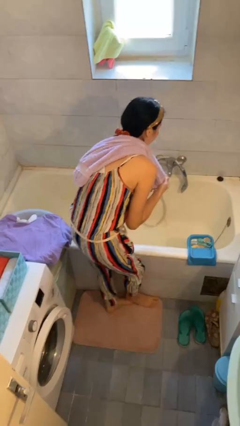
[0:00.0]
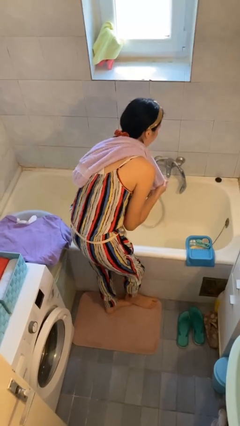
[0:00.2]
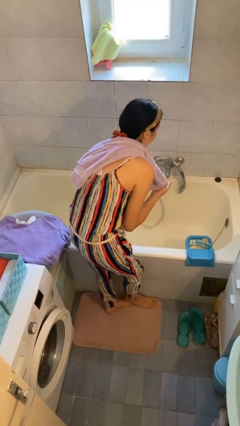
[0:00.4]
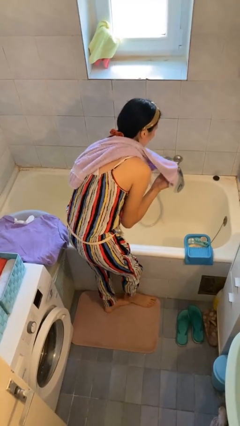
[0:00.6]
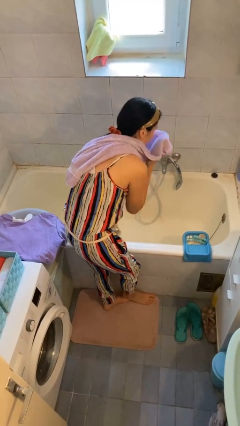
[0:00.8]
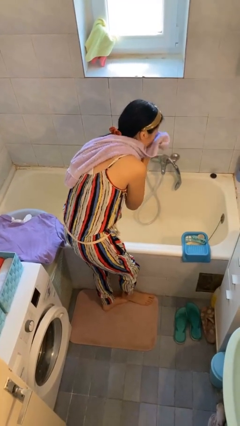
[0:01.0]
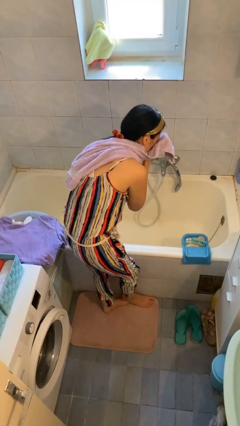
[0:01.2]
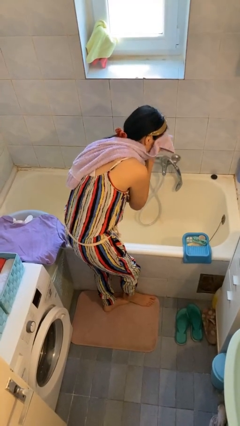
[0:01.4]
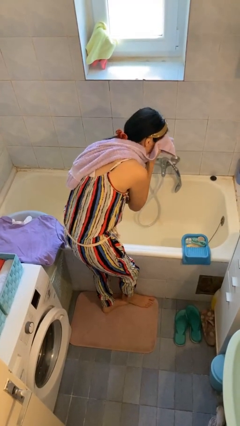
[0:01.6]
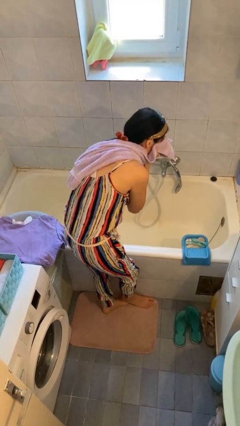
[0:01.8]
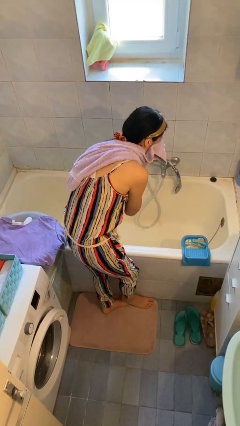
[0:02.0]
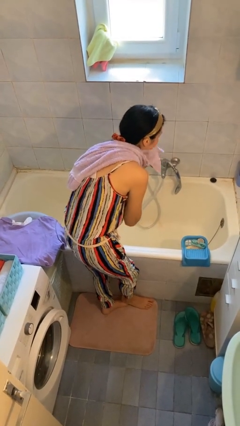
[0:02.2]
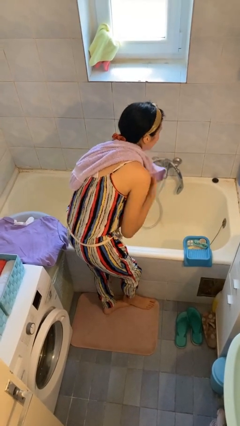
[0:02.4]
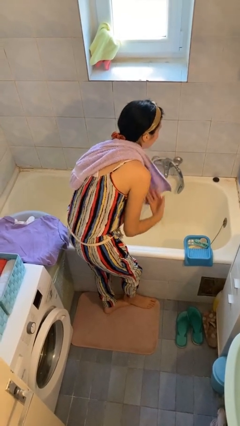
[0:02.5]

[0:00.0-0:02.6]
person dries face with towel

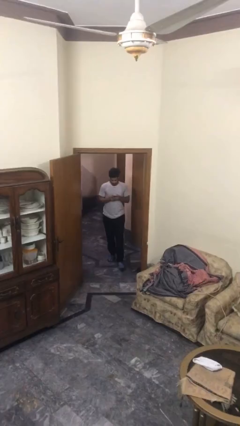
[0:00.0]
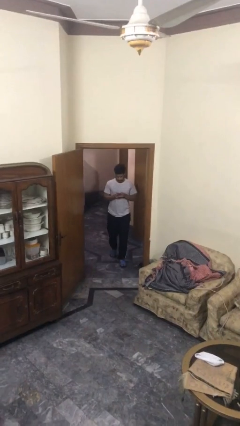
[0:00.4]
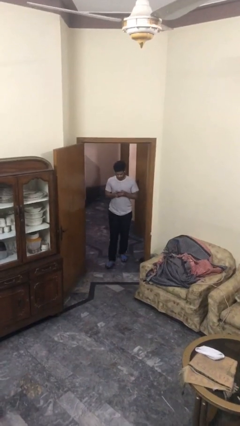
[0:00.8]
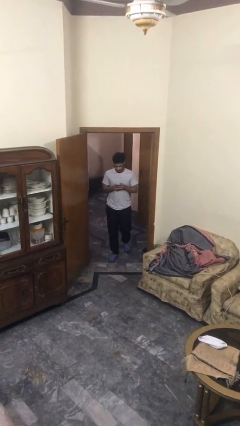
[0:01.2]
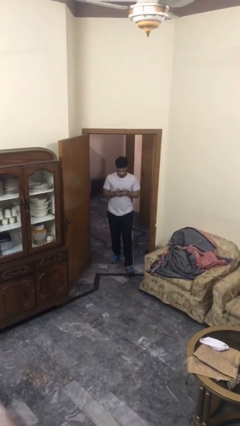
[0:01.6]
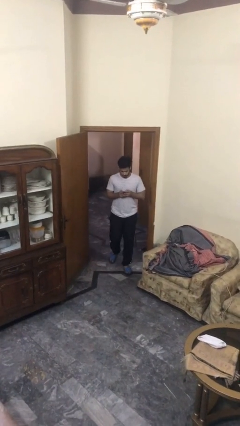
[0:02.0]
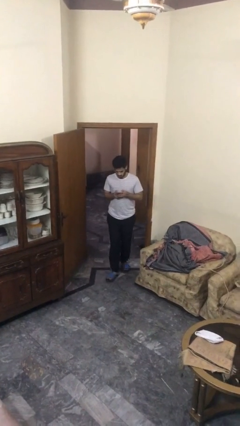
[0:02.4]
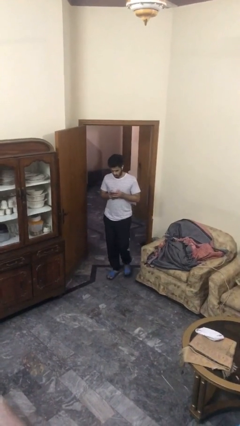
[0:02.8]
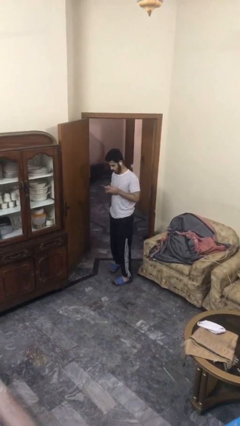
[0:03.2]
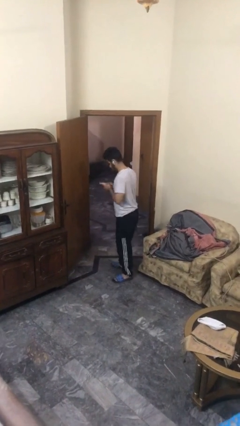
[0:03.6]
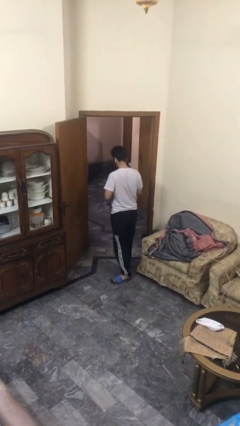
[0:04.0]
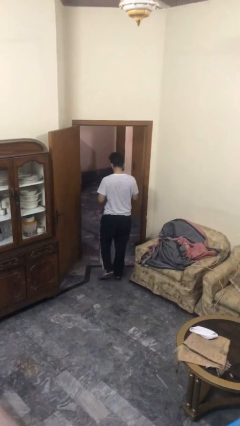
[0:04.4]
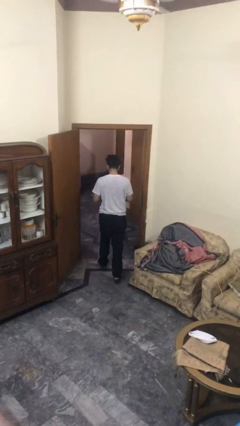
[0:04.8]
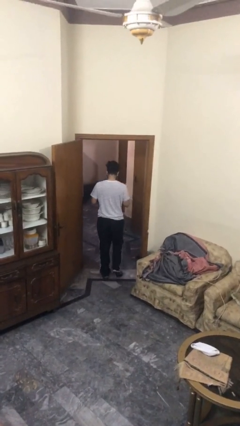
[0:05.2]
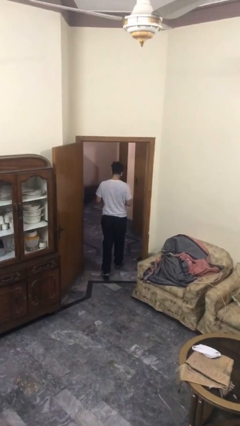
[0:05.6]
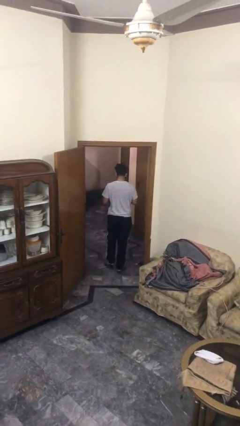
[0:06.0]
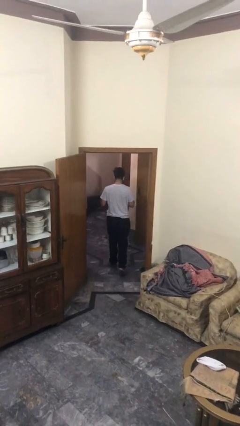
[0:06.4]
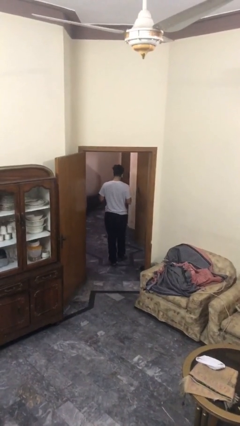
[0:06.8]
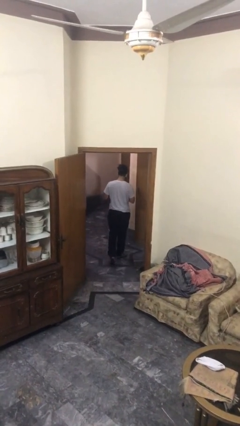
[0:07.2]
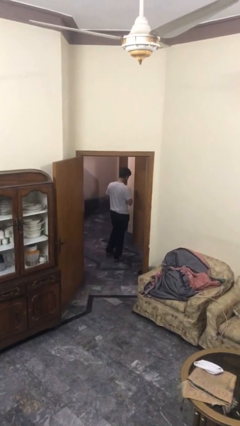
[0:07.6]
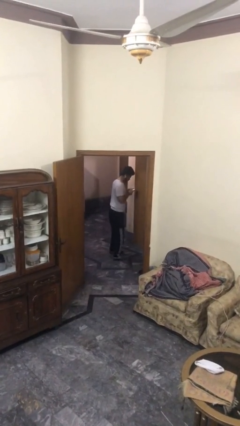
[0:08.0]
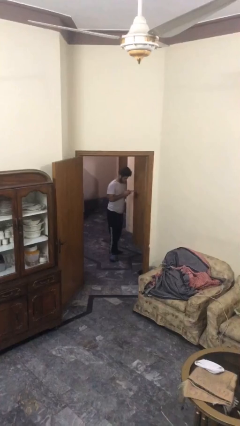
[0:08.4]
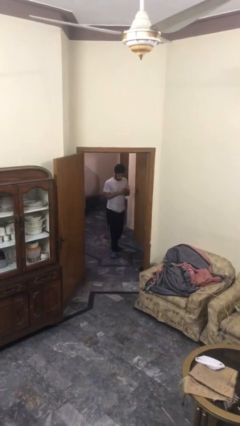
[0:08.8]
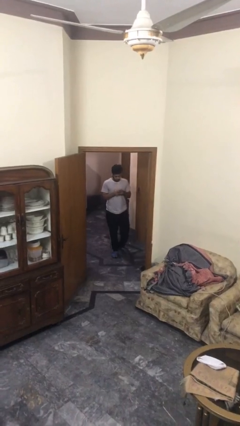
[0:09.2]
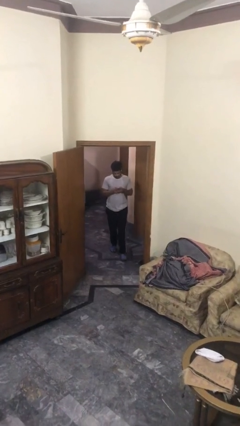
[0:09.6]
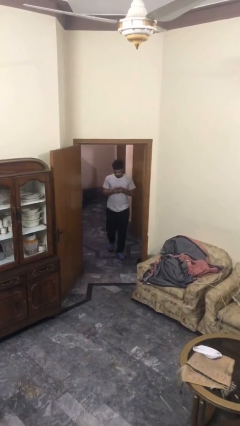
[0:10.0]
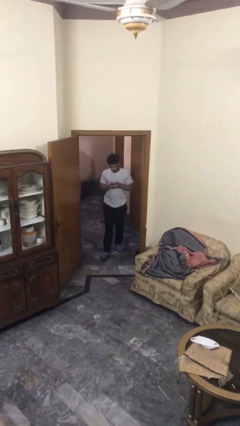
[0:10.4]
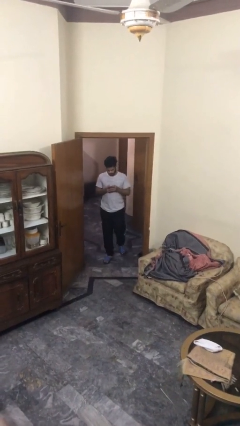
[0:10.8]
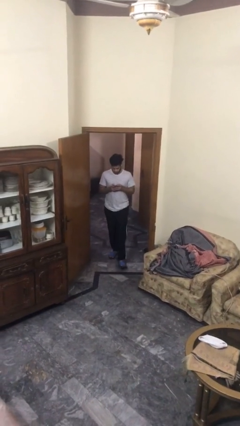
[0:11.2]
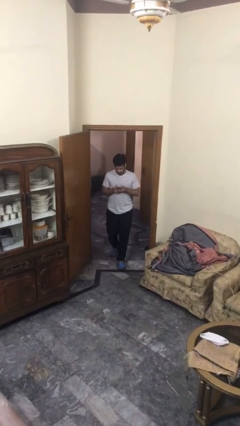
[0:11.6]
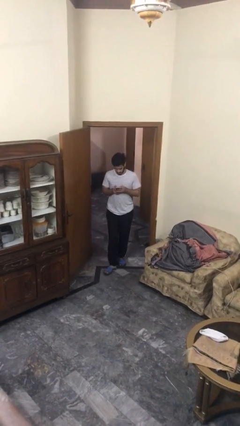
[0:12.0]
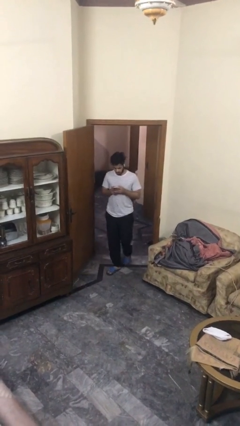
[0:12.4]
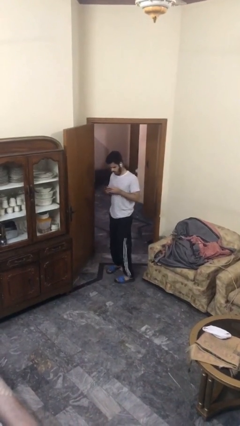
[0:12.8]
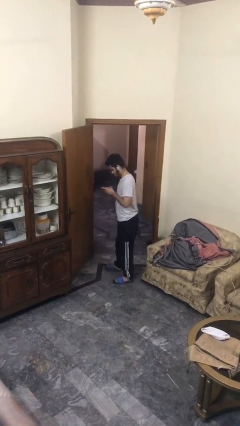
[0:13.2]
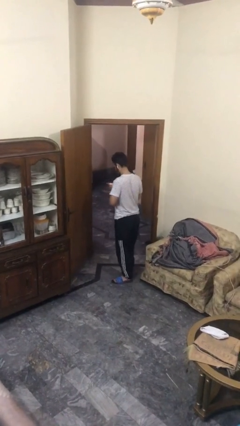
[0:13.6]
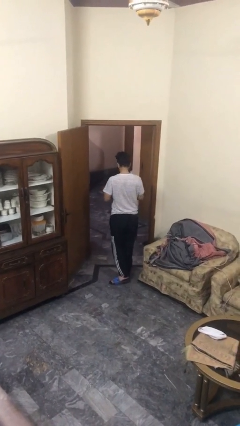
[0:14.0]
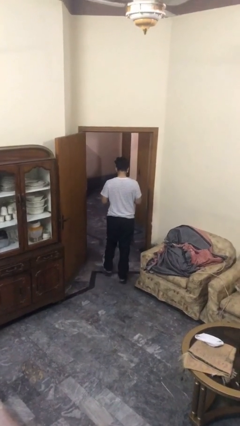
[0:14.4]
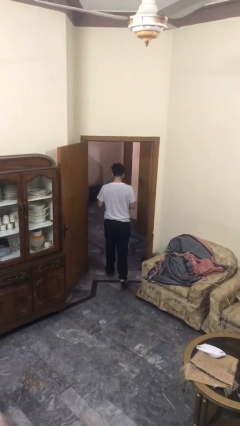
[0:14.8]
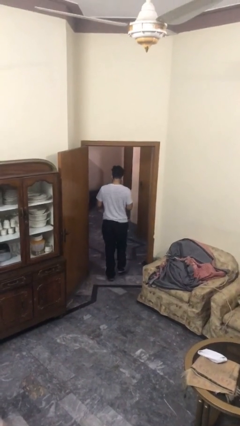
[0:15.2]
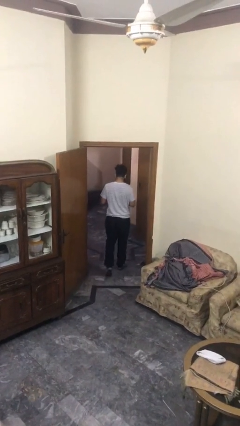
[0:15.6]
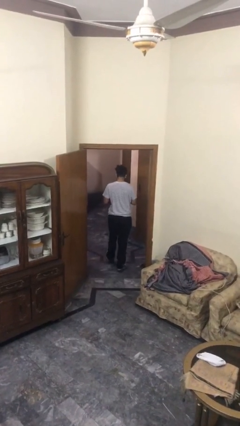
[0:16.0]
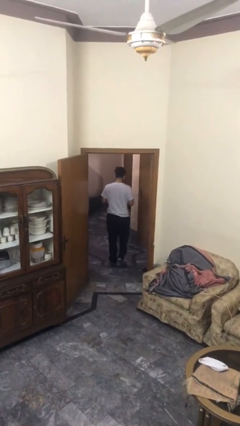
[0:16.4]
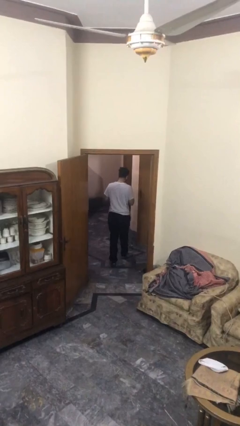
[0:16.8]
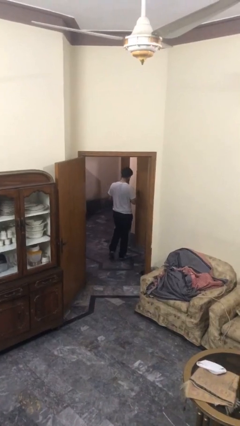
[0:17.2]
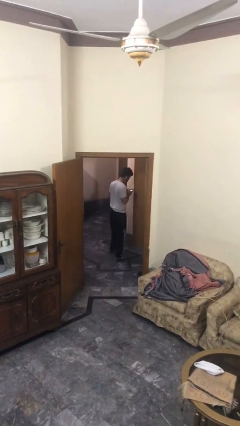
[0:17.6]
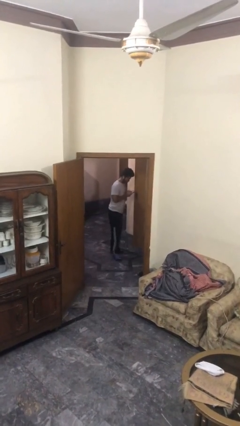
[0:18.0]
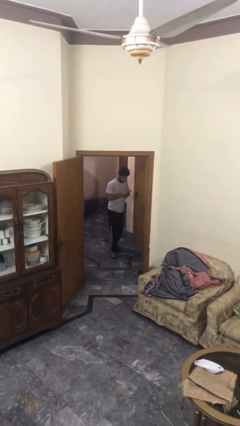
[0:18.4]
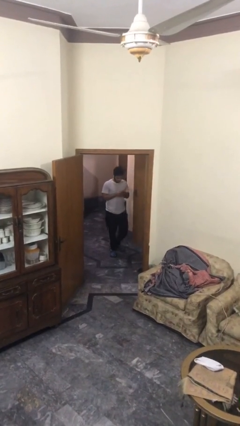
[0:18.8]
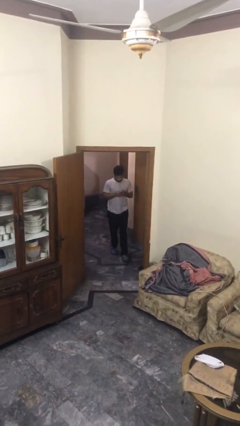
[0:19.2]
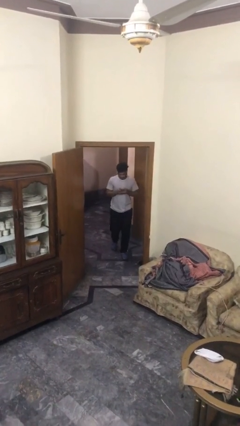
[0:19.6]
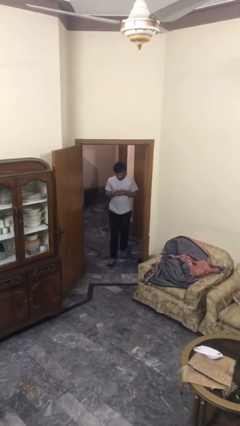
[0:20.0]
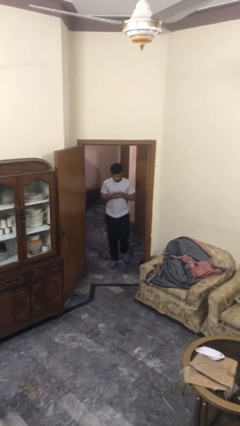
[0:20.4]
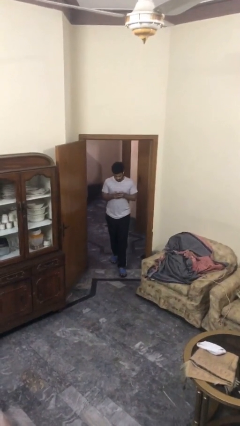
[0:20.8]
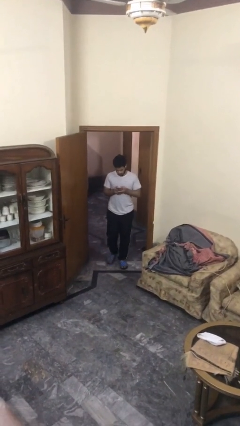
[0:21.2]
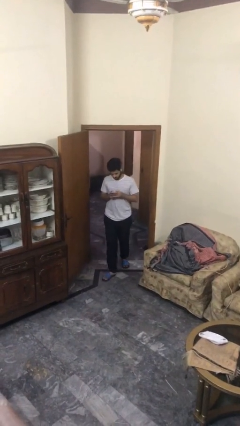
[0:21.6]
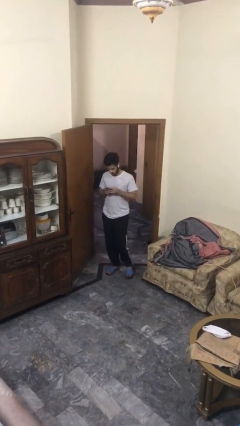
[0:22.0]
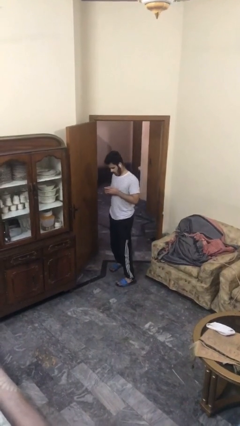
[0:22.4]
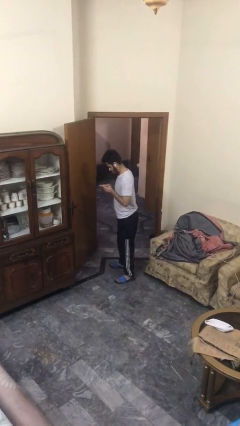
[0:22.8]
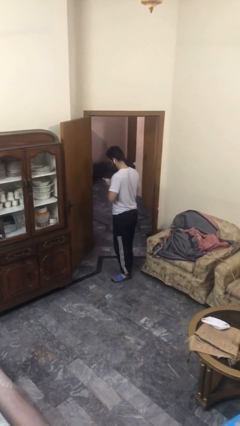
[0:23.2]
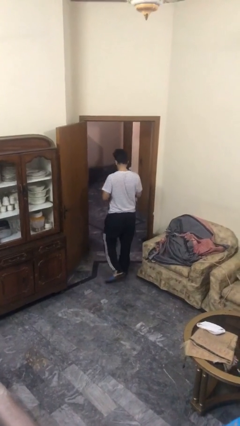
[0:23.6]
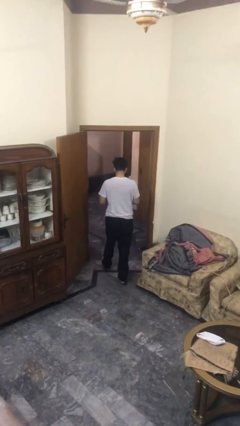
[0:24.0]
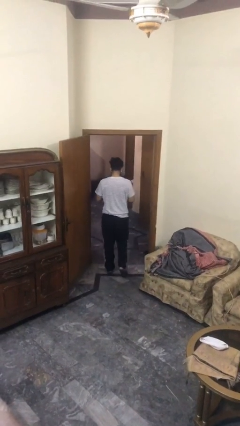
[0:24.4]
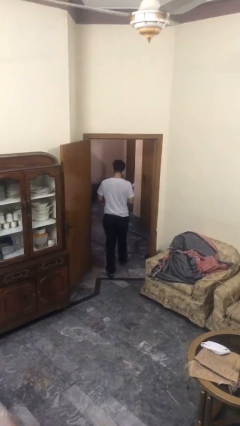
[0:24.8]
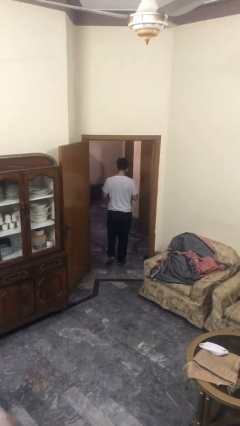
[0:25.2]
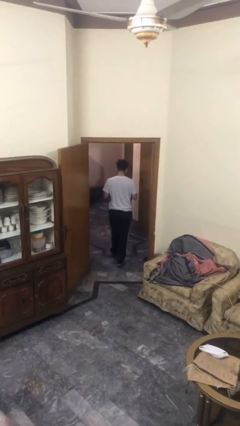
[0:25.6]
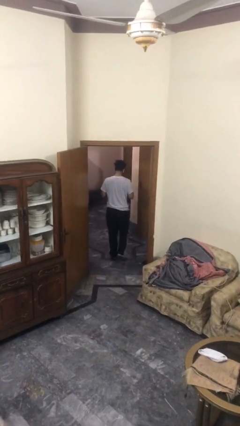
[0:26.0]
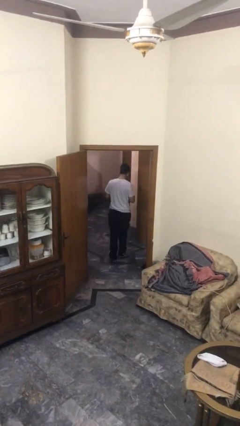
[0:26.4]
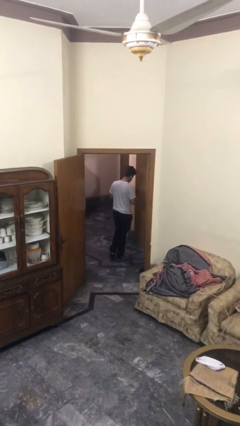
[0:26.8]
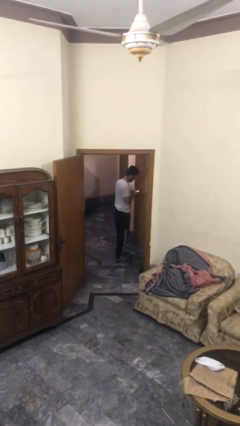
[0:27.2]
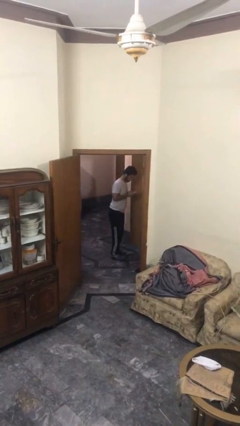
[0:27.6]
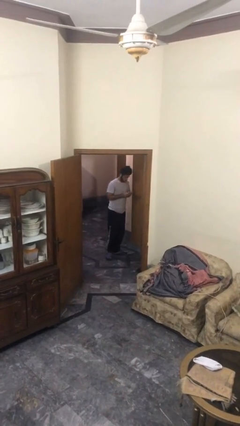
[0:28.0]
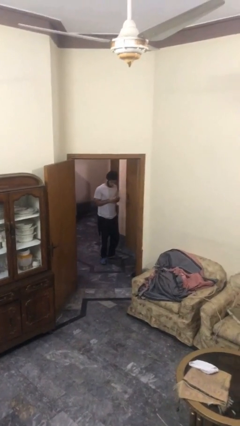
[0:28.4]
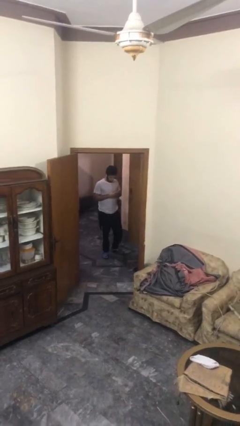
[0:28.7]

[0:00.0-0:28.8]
person texts on phone

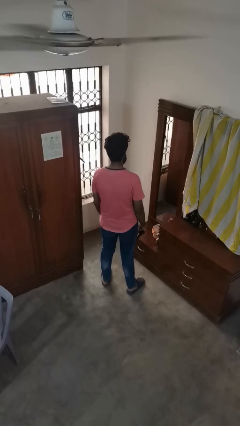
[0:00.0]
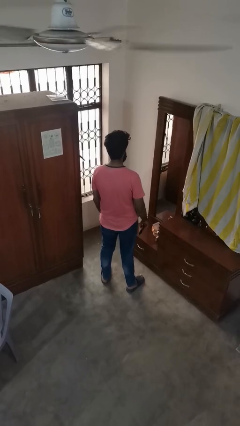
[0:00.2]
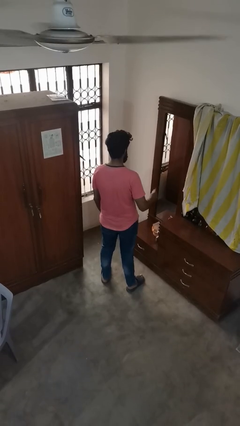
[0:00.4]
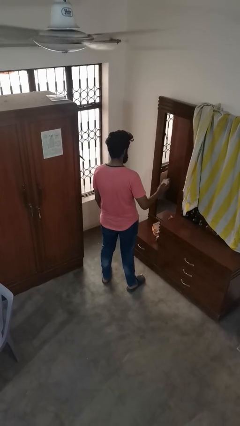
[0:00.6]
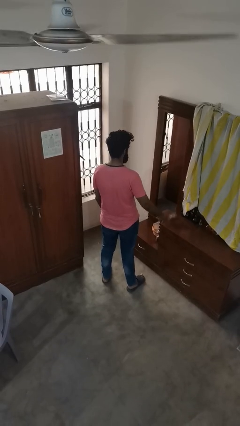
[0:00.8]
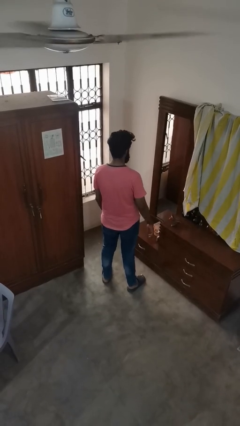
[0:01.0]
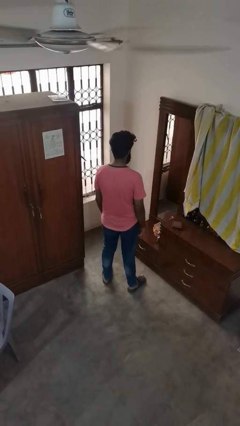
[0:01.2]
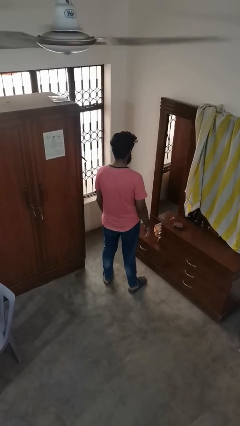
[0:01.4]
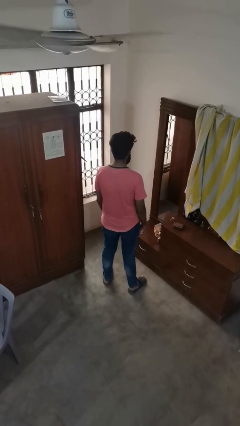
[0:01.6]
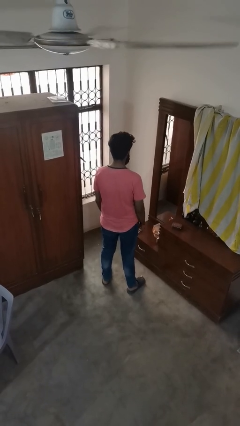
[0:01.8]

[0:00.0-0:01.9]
person throws object to ground
